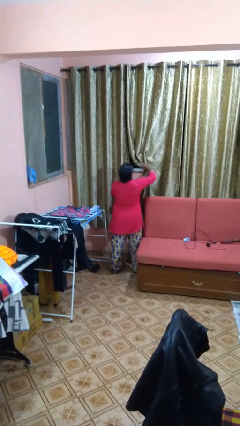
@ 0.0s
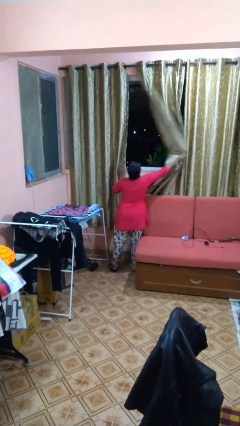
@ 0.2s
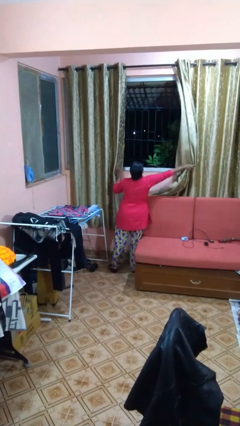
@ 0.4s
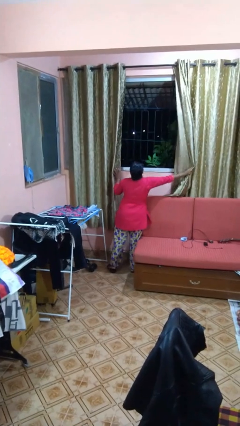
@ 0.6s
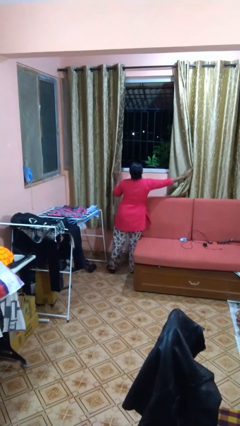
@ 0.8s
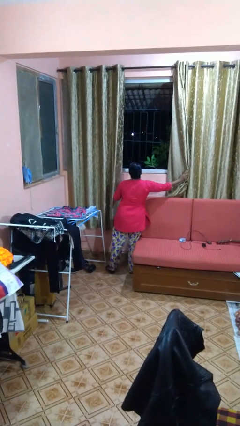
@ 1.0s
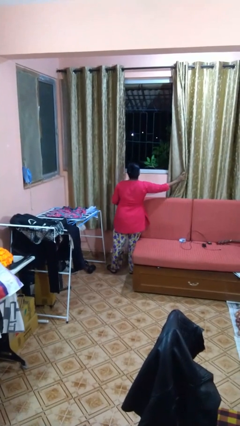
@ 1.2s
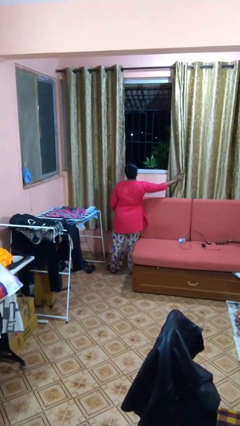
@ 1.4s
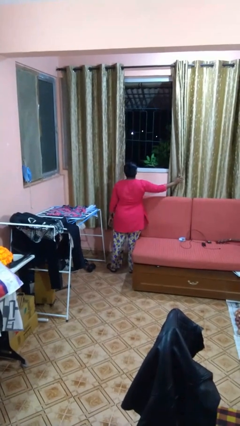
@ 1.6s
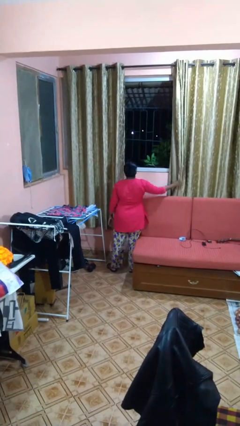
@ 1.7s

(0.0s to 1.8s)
person opens curtains

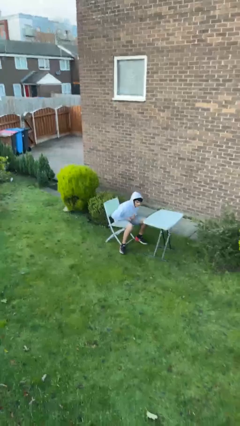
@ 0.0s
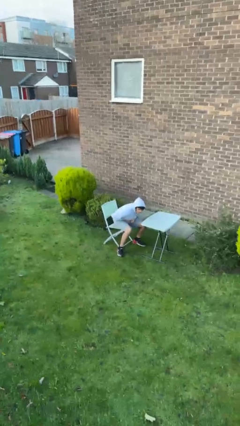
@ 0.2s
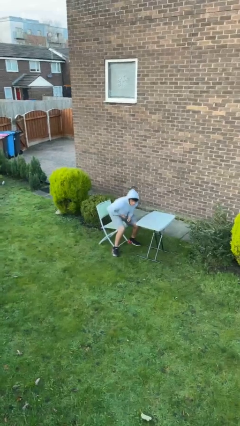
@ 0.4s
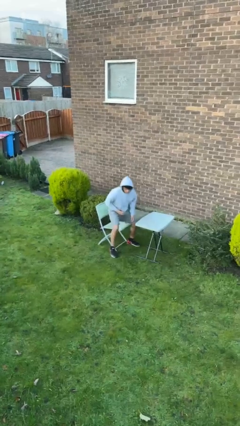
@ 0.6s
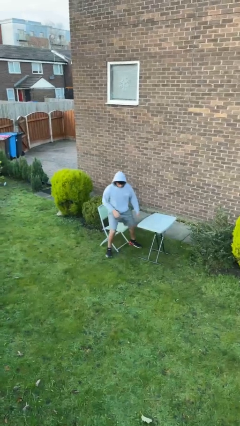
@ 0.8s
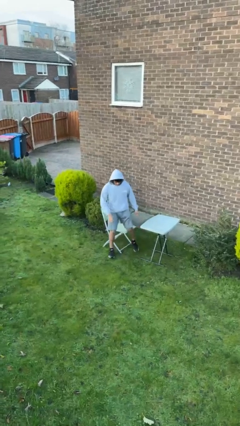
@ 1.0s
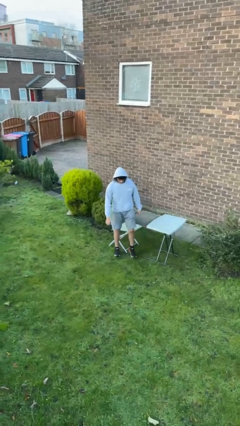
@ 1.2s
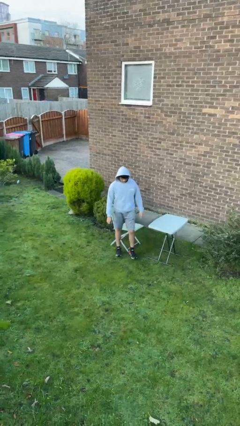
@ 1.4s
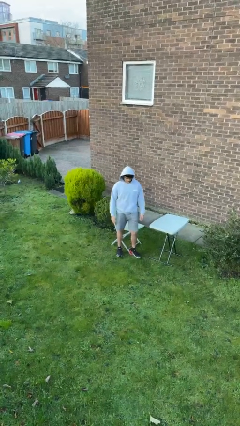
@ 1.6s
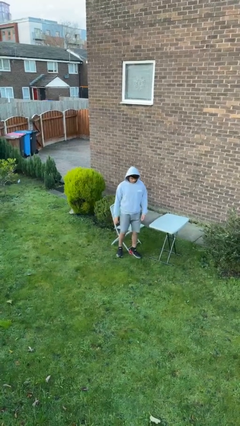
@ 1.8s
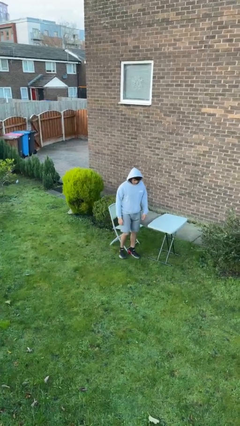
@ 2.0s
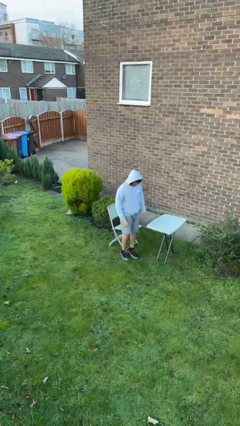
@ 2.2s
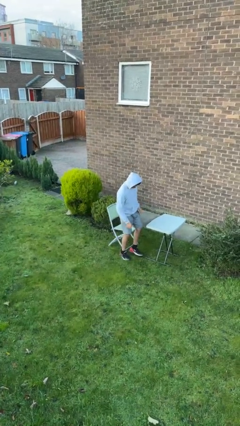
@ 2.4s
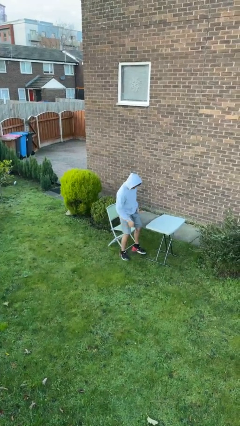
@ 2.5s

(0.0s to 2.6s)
person stands up

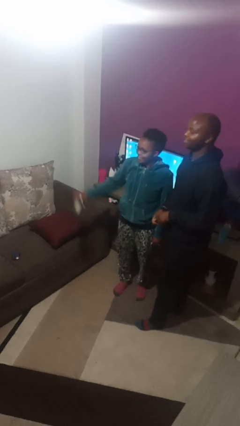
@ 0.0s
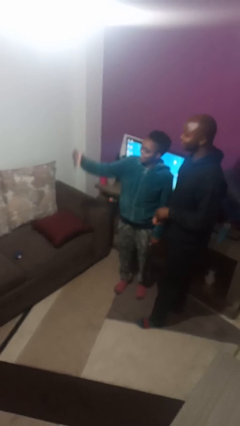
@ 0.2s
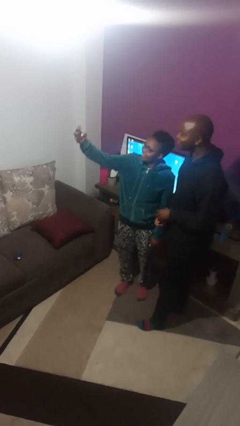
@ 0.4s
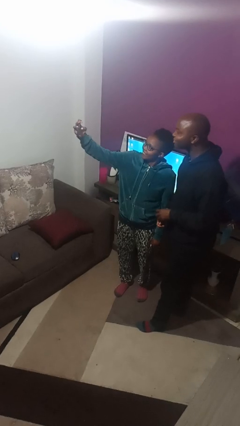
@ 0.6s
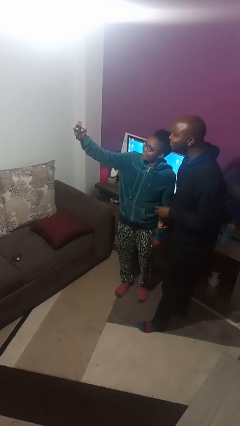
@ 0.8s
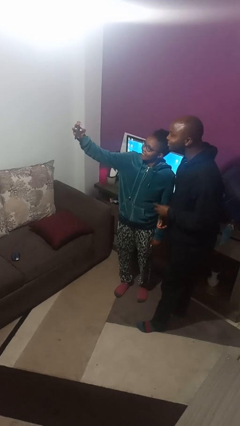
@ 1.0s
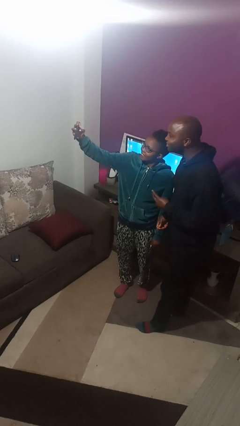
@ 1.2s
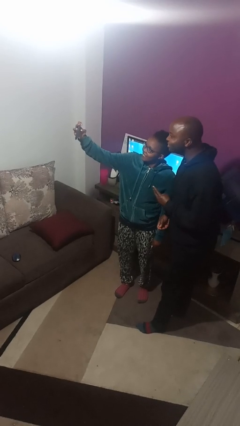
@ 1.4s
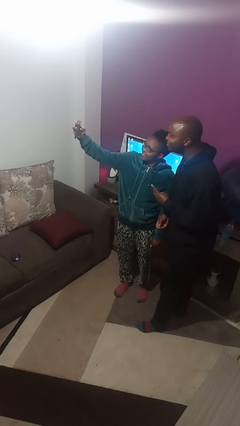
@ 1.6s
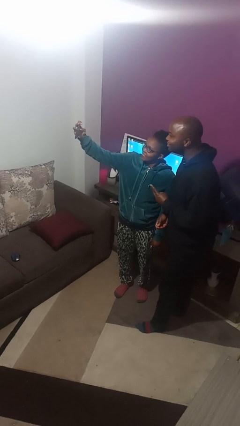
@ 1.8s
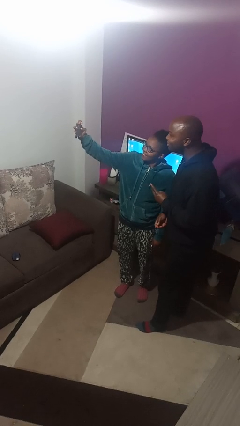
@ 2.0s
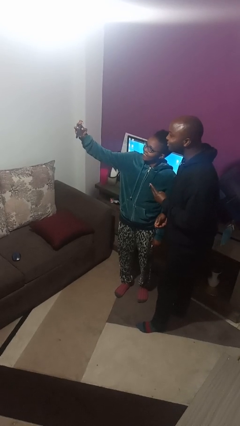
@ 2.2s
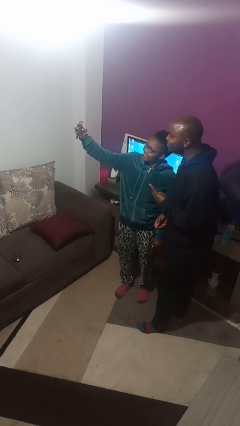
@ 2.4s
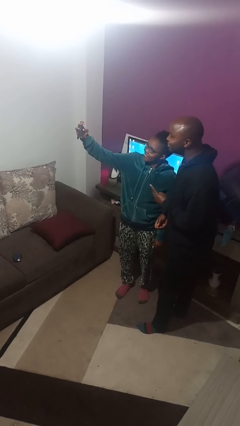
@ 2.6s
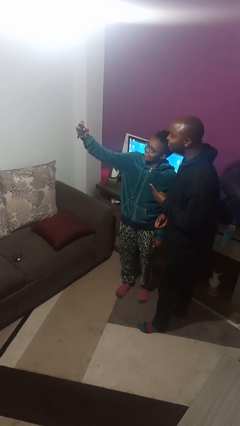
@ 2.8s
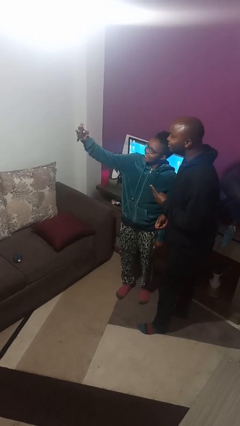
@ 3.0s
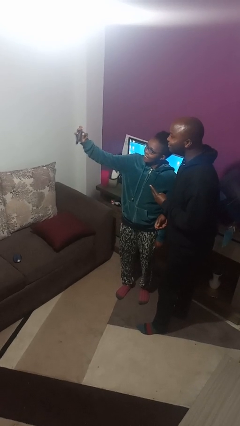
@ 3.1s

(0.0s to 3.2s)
person takes selfie with person

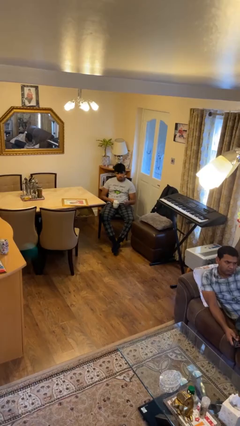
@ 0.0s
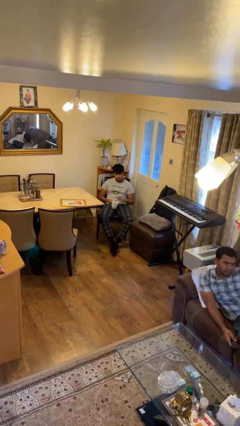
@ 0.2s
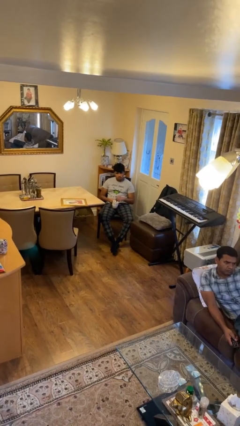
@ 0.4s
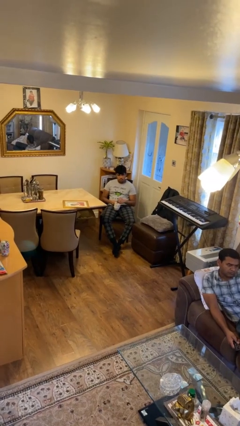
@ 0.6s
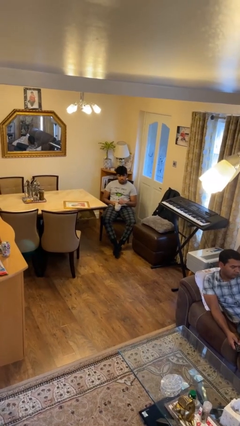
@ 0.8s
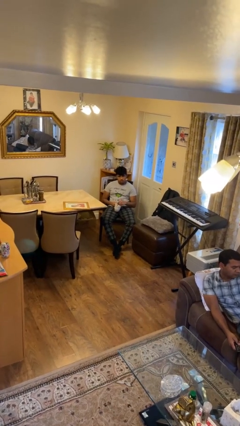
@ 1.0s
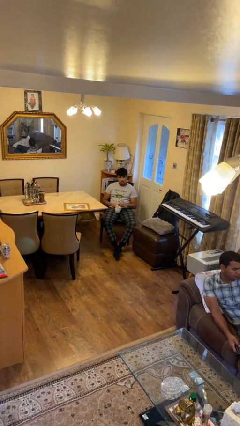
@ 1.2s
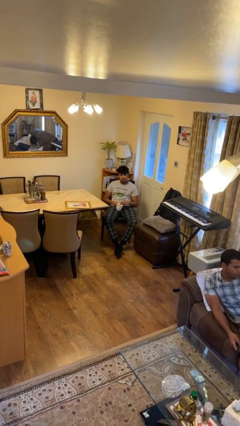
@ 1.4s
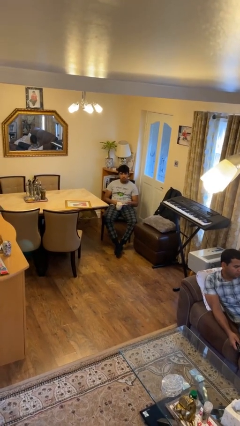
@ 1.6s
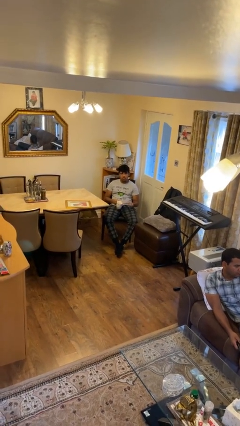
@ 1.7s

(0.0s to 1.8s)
person stirs mug

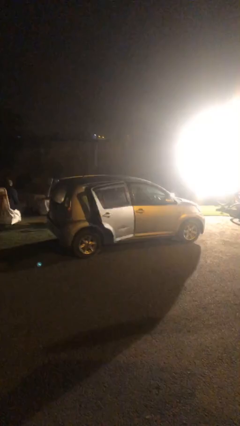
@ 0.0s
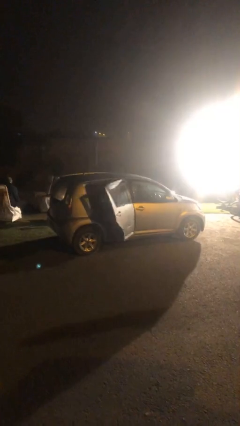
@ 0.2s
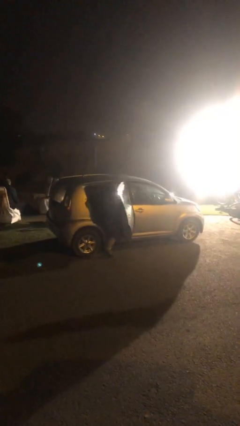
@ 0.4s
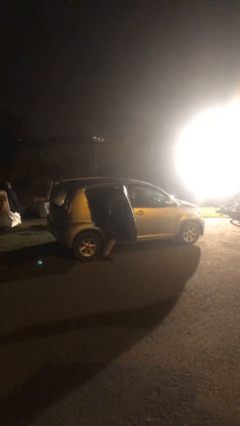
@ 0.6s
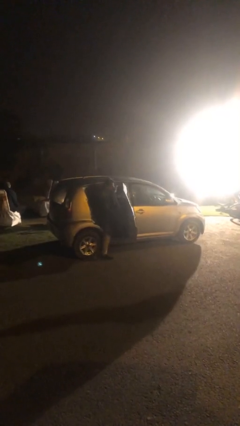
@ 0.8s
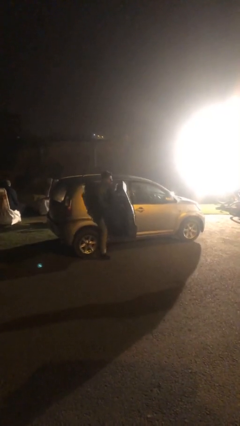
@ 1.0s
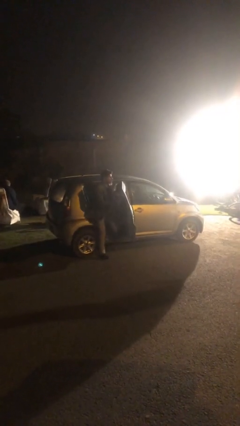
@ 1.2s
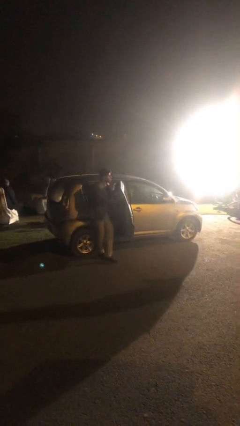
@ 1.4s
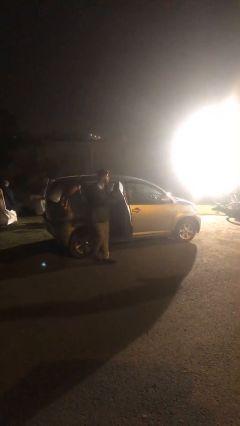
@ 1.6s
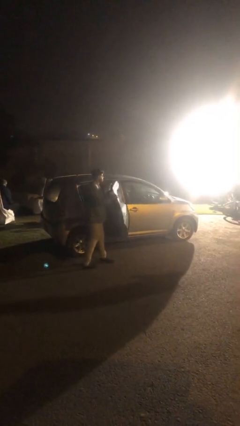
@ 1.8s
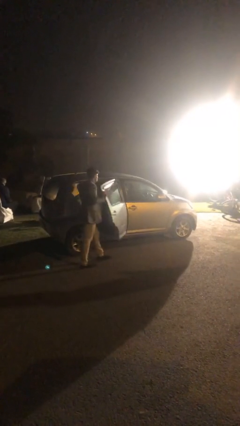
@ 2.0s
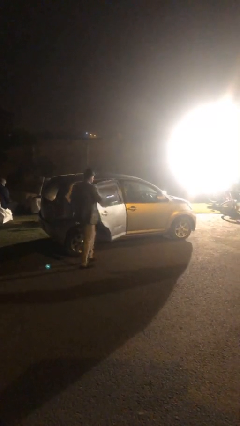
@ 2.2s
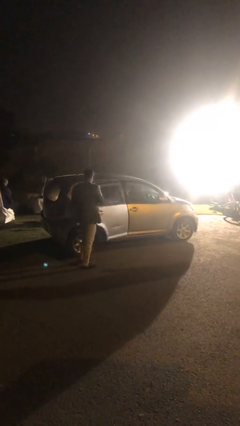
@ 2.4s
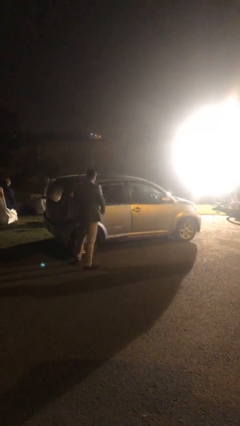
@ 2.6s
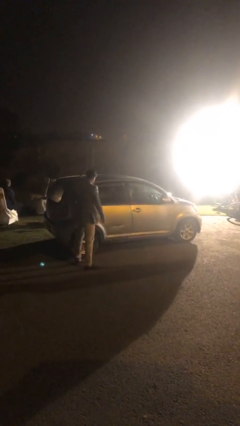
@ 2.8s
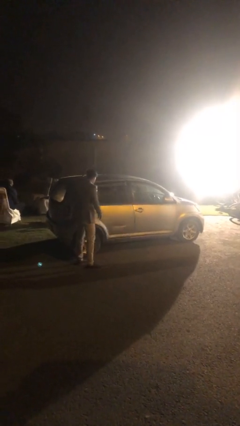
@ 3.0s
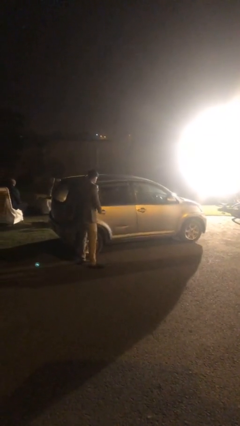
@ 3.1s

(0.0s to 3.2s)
car drops off person

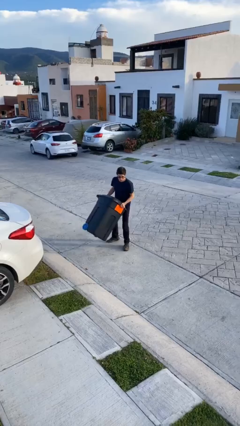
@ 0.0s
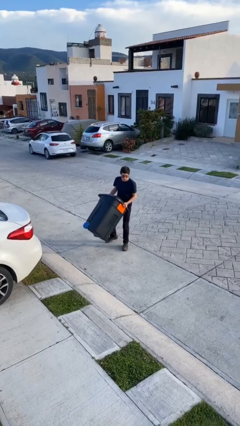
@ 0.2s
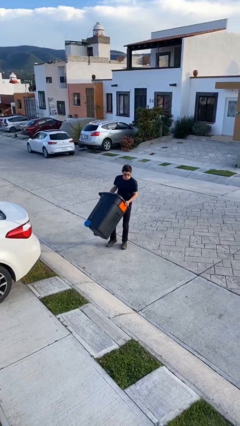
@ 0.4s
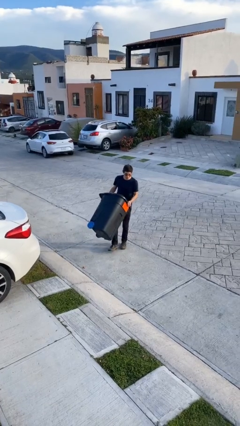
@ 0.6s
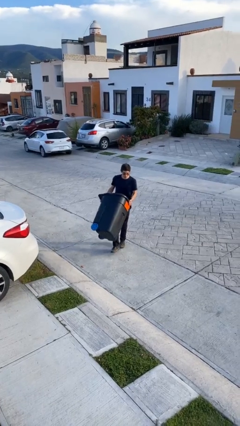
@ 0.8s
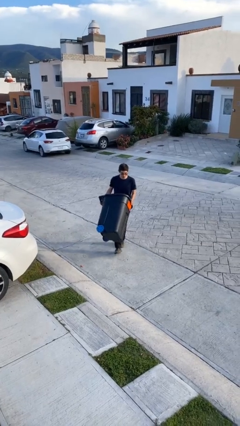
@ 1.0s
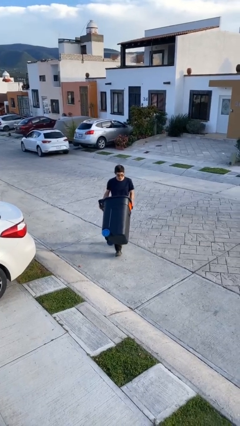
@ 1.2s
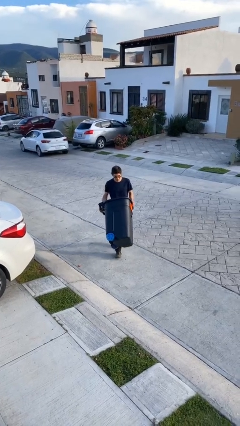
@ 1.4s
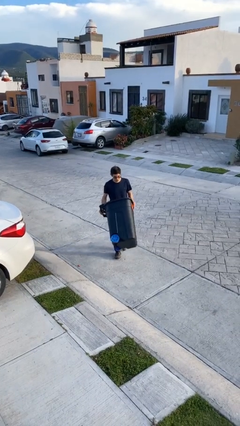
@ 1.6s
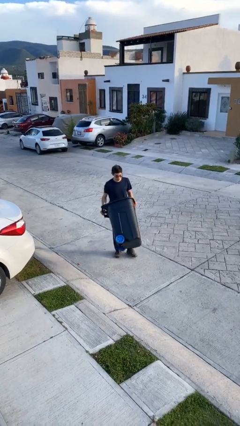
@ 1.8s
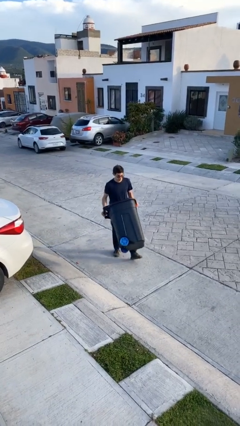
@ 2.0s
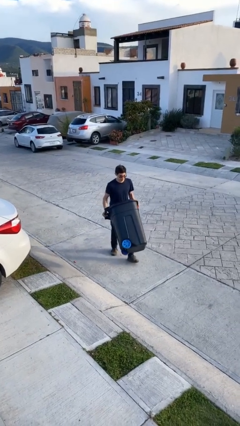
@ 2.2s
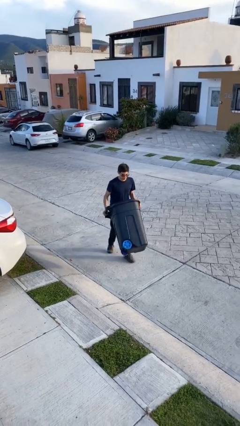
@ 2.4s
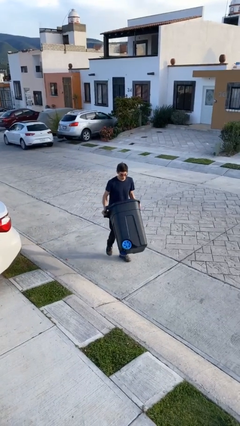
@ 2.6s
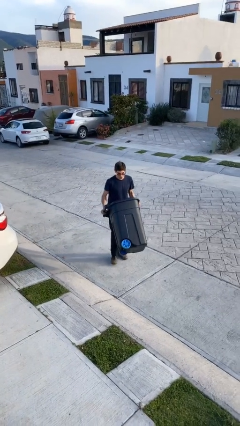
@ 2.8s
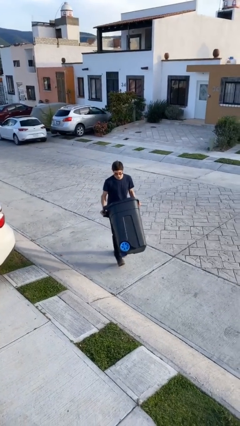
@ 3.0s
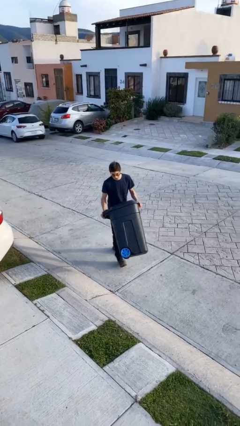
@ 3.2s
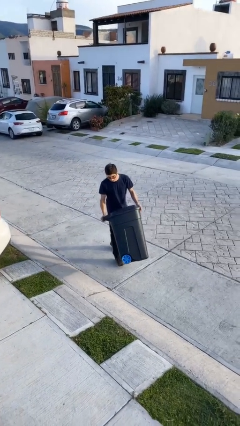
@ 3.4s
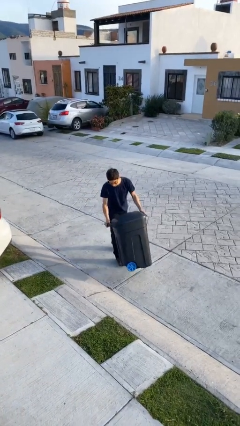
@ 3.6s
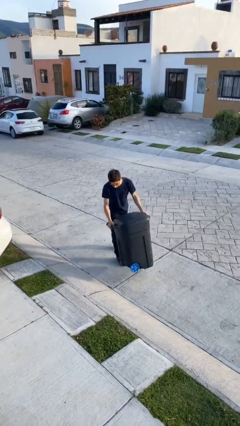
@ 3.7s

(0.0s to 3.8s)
person carries heavy object

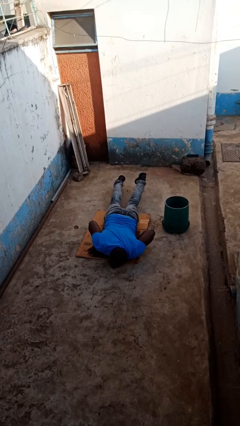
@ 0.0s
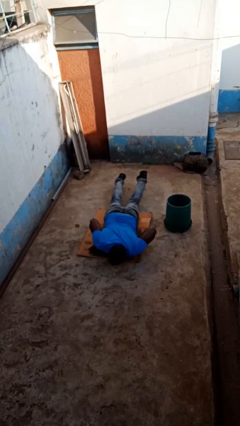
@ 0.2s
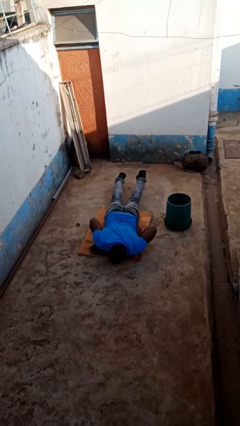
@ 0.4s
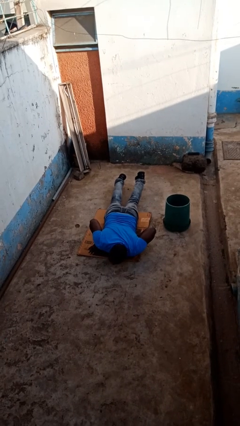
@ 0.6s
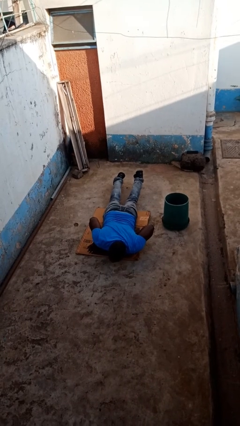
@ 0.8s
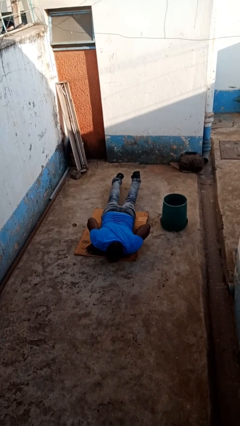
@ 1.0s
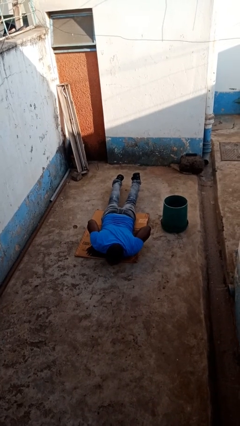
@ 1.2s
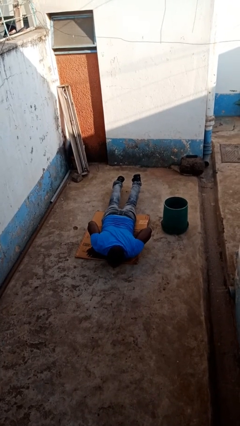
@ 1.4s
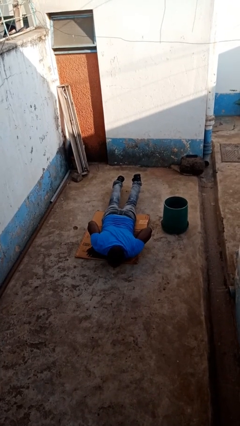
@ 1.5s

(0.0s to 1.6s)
person lies down on floor
